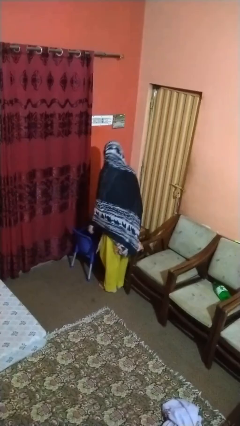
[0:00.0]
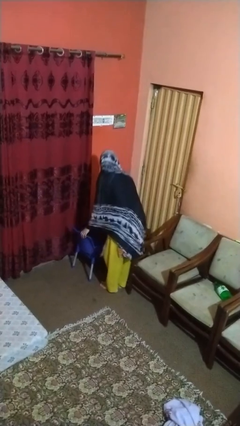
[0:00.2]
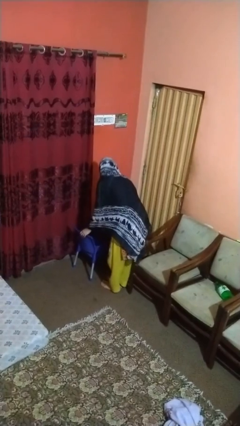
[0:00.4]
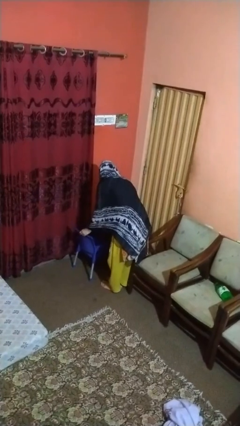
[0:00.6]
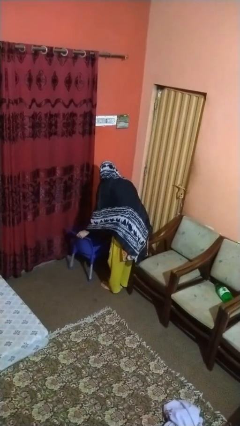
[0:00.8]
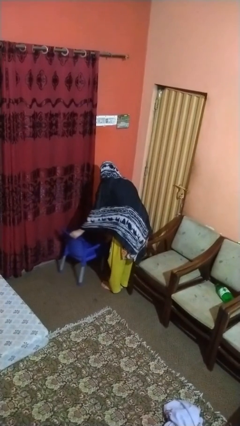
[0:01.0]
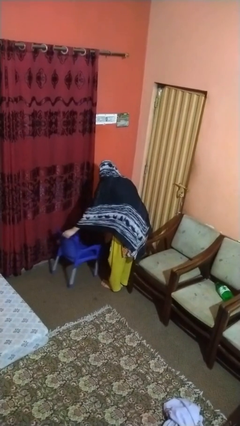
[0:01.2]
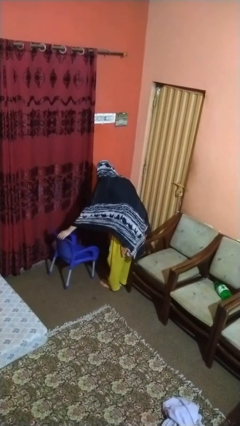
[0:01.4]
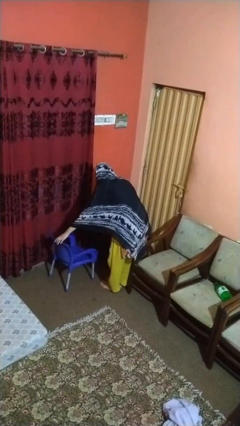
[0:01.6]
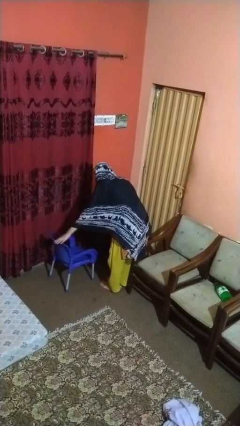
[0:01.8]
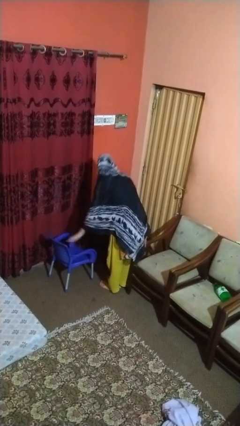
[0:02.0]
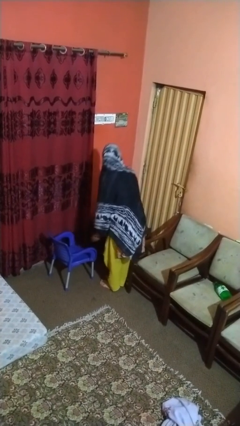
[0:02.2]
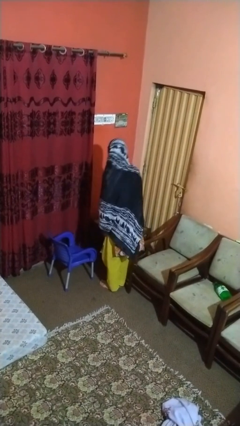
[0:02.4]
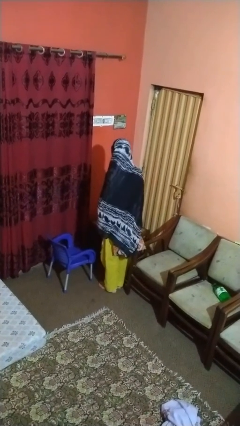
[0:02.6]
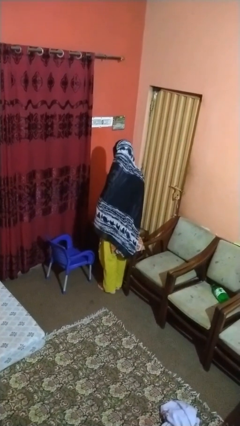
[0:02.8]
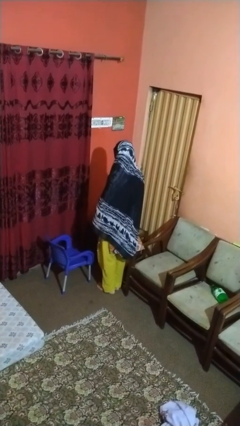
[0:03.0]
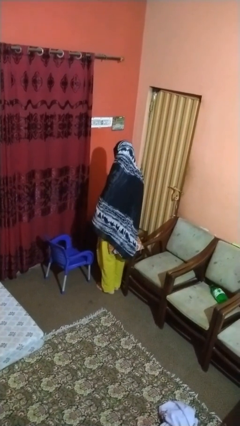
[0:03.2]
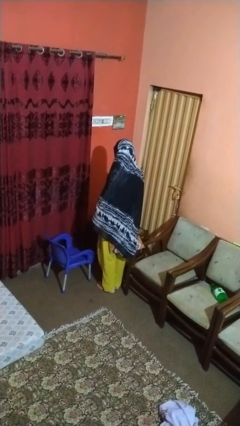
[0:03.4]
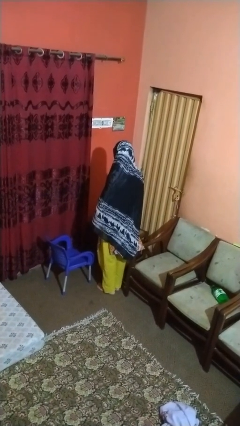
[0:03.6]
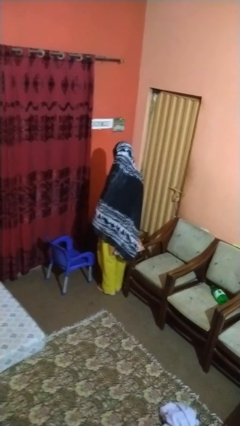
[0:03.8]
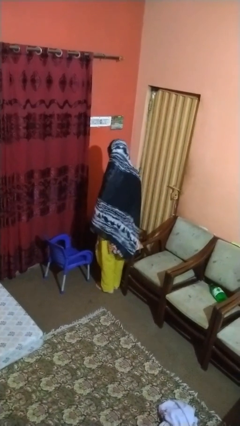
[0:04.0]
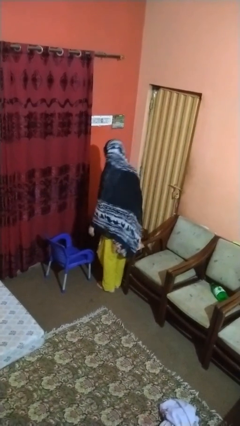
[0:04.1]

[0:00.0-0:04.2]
person pulls out chair

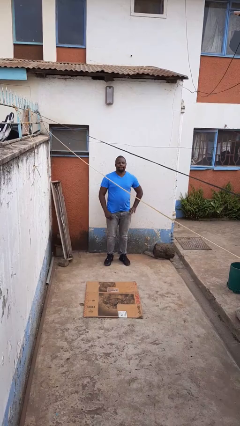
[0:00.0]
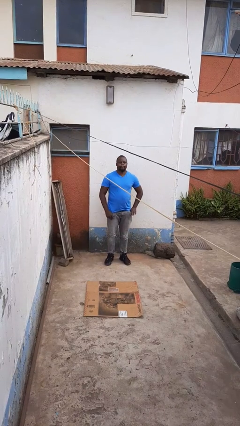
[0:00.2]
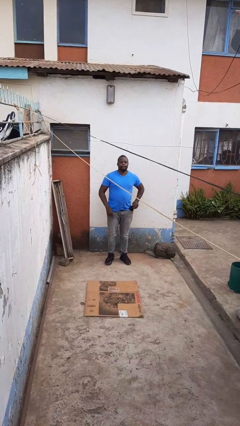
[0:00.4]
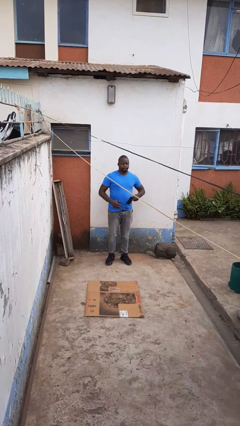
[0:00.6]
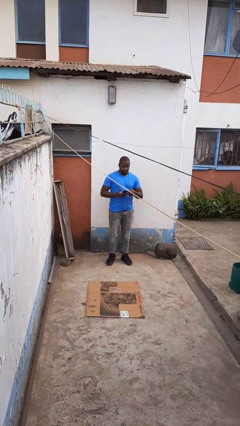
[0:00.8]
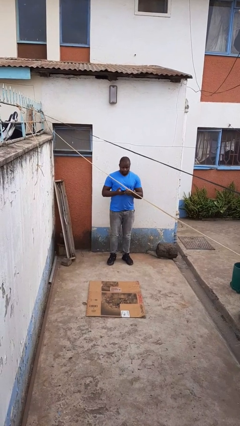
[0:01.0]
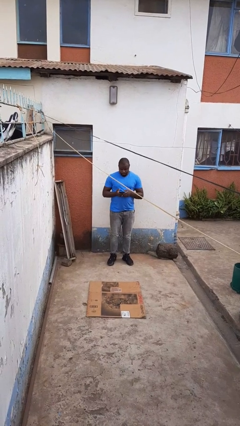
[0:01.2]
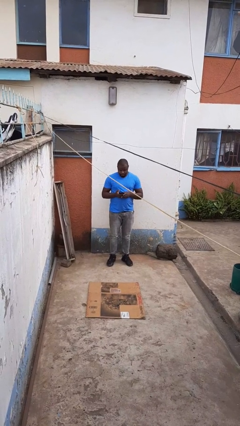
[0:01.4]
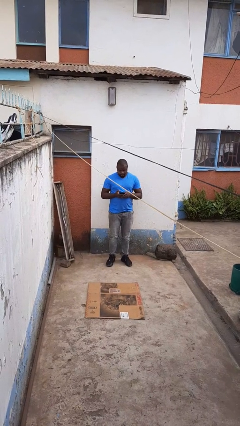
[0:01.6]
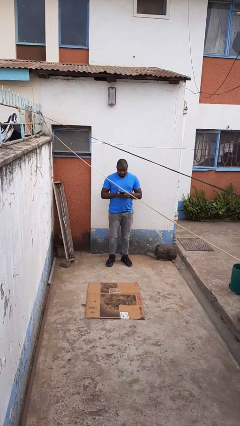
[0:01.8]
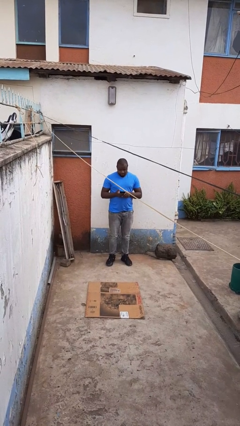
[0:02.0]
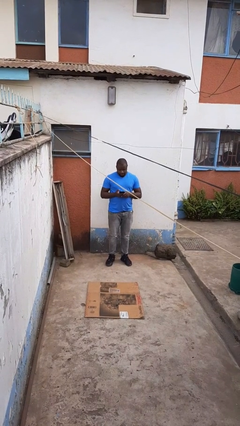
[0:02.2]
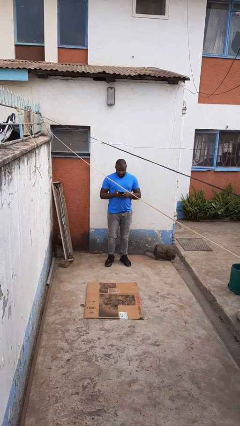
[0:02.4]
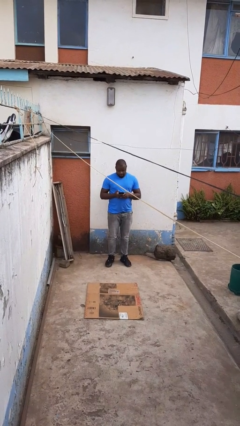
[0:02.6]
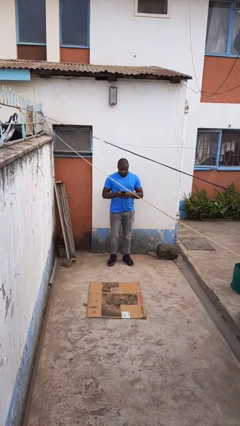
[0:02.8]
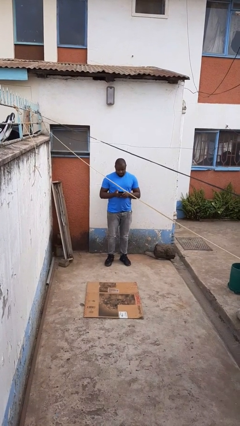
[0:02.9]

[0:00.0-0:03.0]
person takes phone from pocket

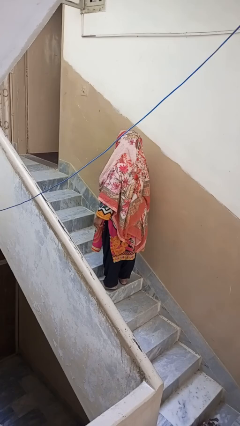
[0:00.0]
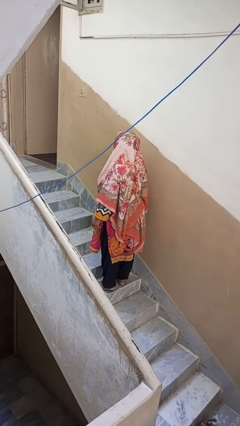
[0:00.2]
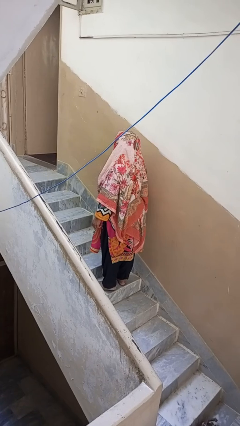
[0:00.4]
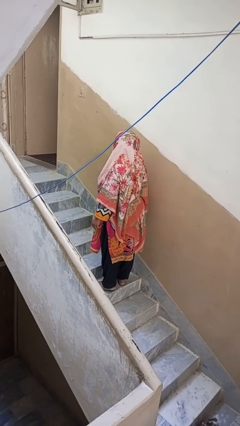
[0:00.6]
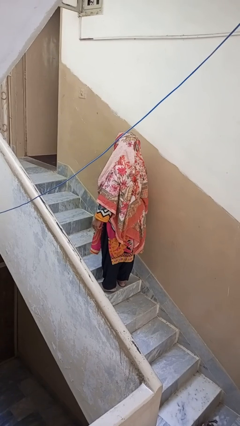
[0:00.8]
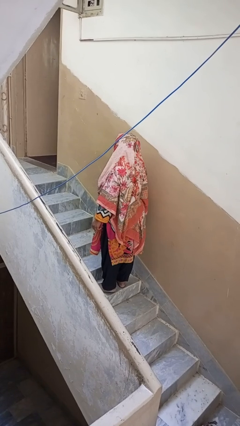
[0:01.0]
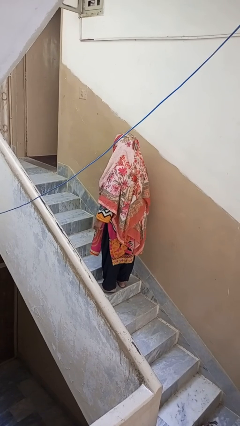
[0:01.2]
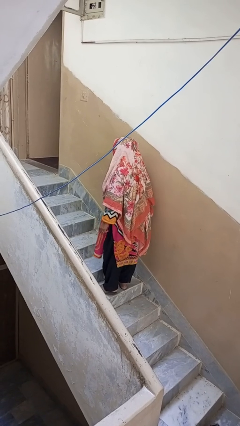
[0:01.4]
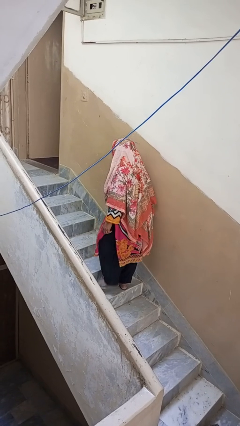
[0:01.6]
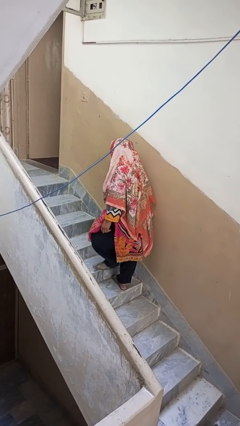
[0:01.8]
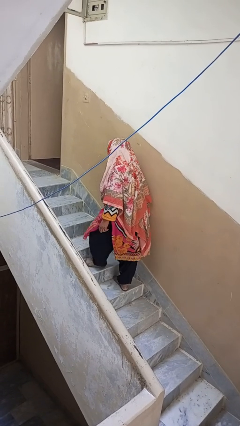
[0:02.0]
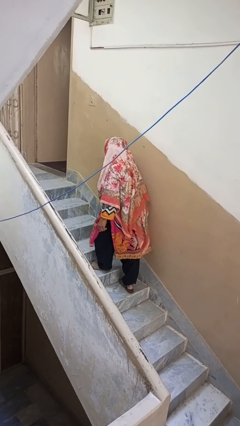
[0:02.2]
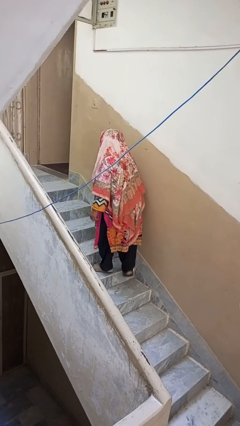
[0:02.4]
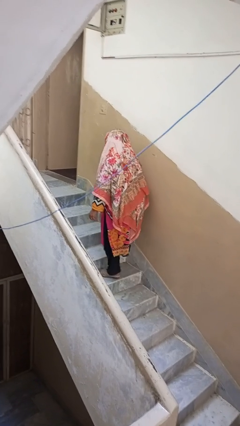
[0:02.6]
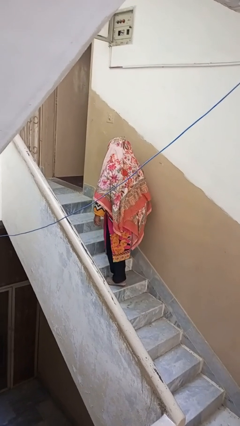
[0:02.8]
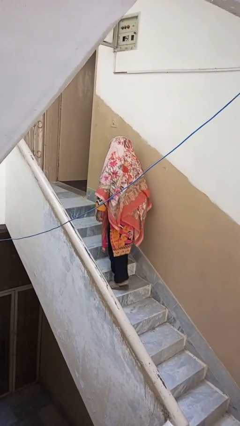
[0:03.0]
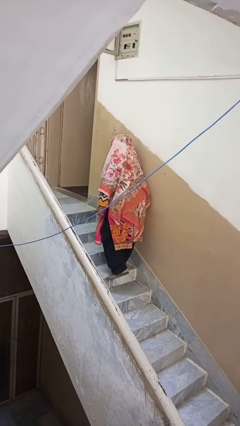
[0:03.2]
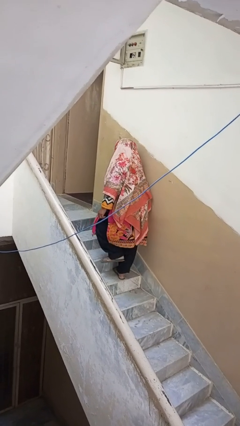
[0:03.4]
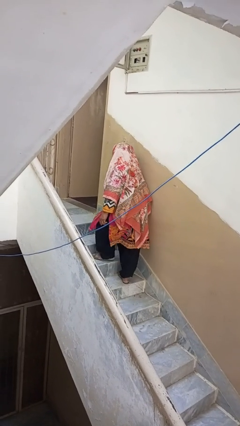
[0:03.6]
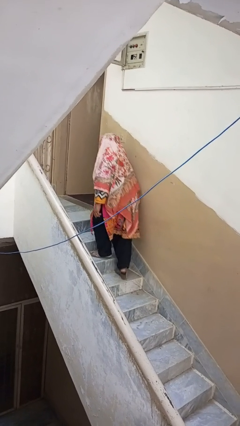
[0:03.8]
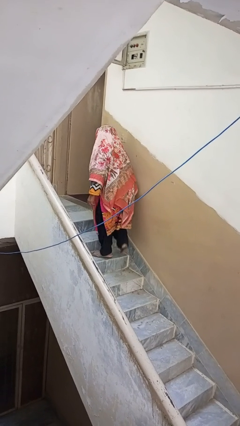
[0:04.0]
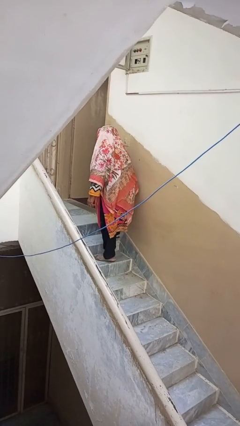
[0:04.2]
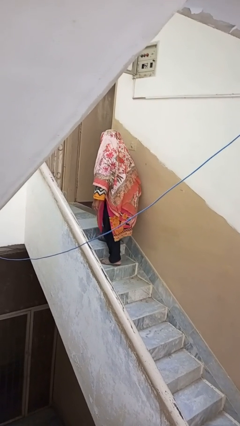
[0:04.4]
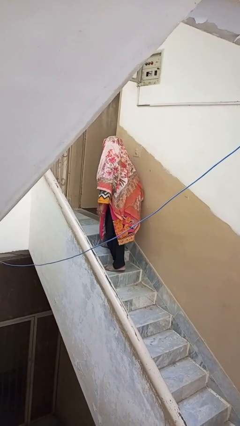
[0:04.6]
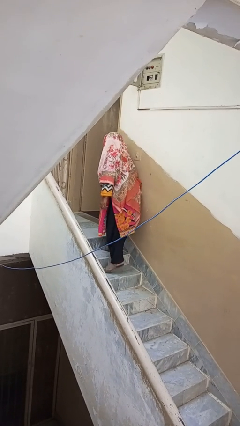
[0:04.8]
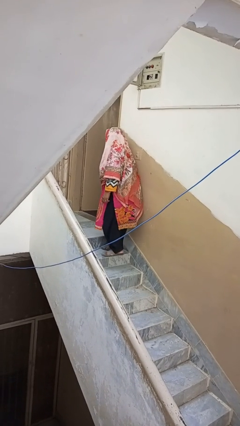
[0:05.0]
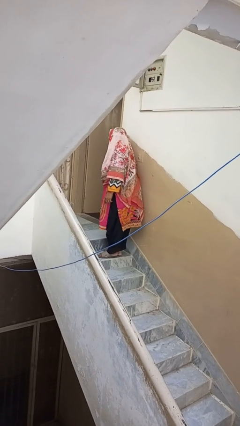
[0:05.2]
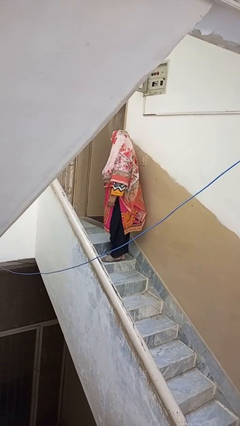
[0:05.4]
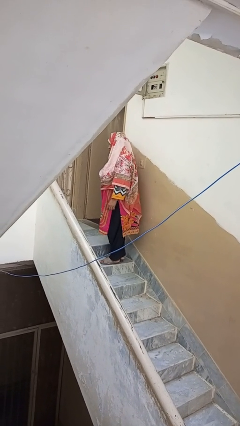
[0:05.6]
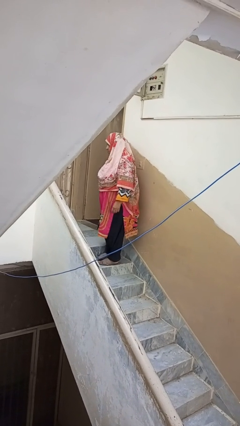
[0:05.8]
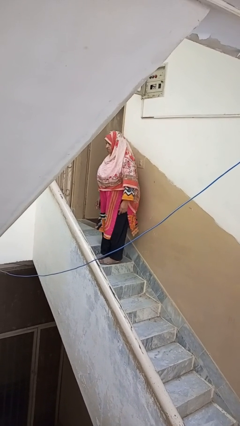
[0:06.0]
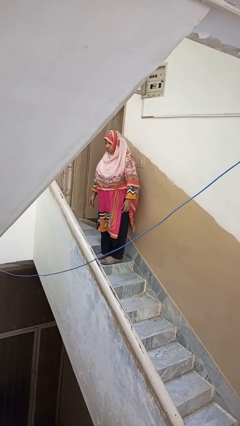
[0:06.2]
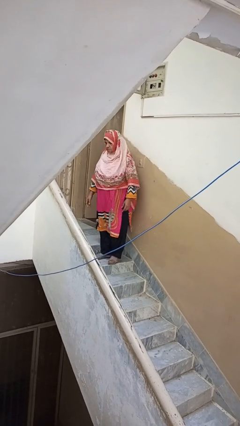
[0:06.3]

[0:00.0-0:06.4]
person climbs up stairs

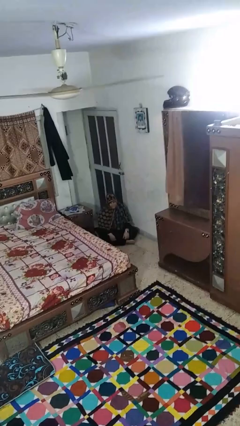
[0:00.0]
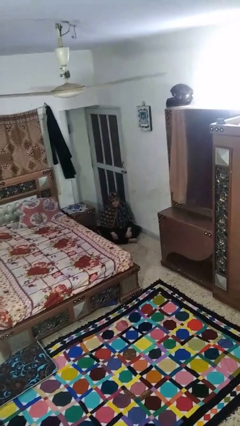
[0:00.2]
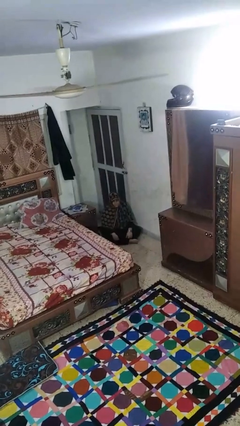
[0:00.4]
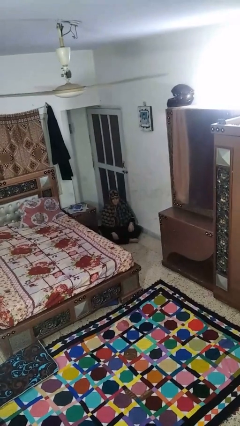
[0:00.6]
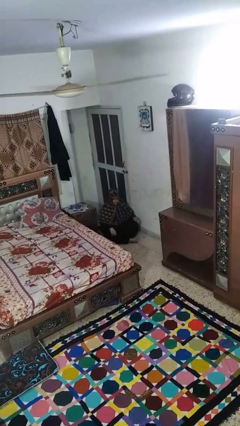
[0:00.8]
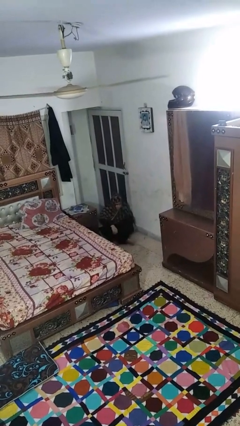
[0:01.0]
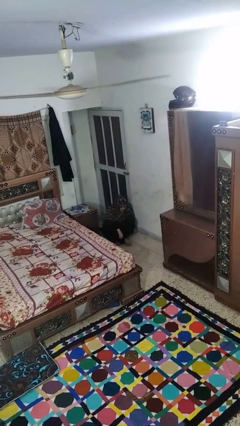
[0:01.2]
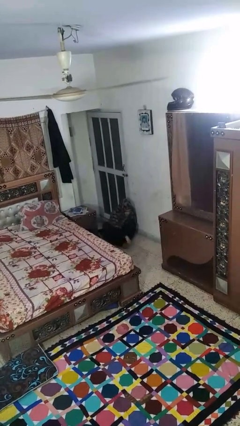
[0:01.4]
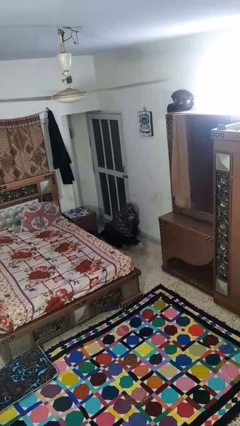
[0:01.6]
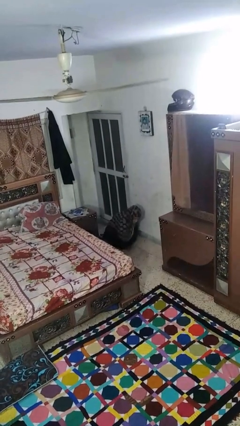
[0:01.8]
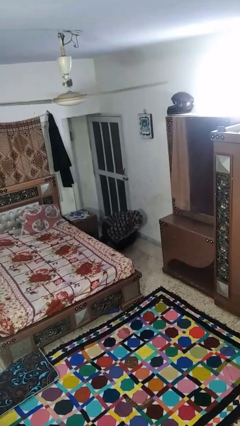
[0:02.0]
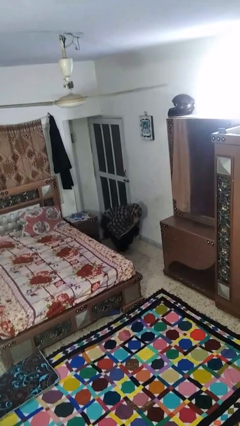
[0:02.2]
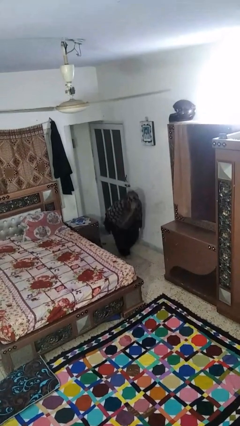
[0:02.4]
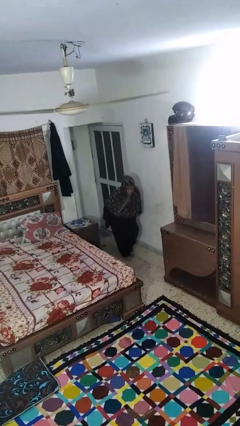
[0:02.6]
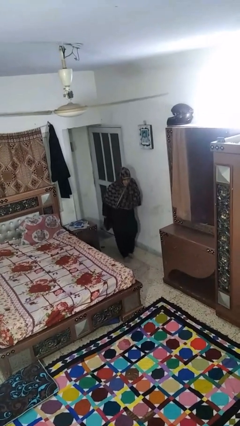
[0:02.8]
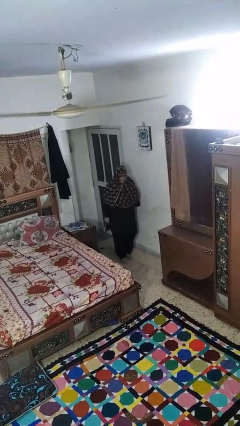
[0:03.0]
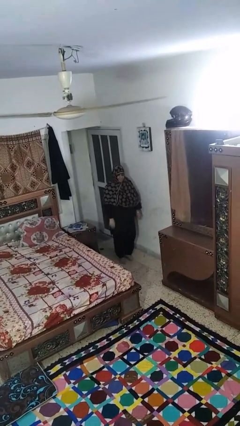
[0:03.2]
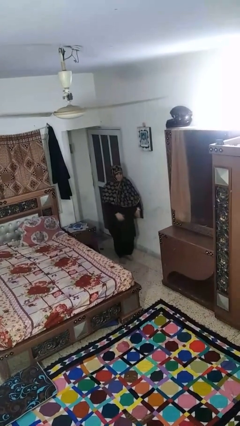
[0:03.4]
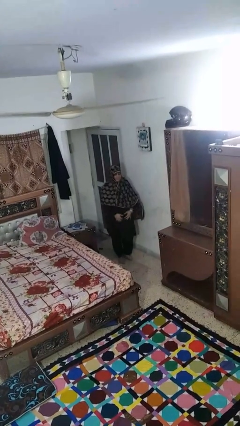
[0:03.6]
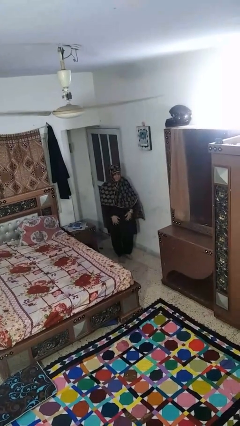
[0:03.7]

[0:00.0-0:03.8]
person stands up from floor
